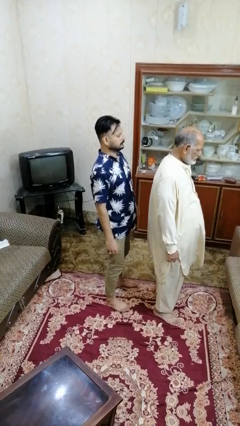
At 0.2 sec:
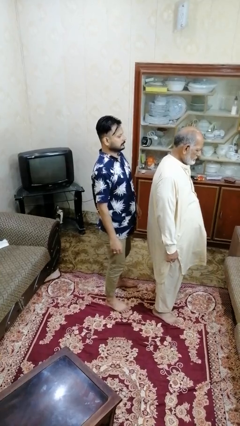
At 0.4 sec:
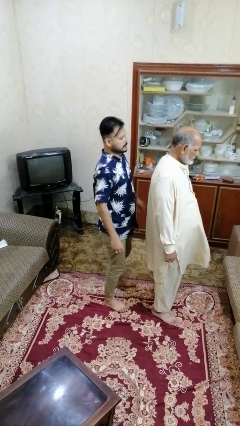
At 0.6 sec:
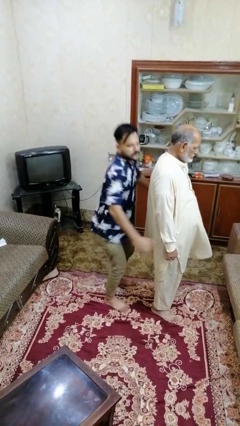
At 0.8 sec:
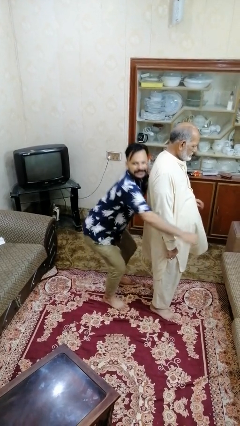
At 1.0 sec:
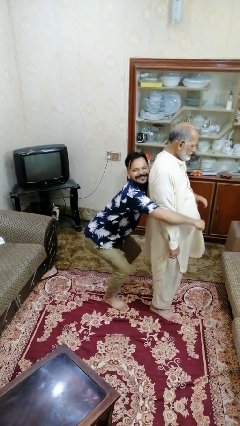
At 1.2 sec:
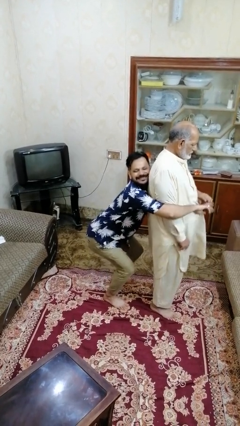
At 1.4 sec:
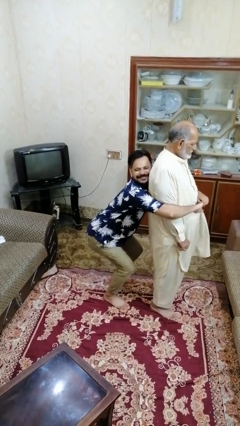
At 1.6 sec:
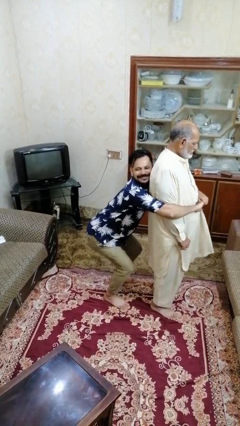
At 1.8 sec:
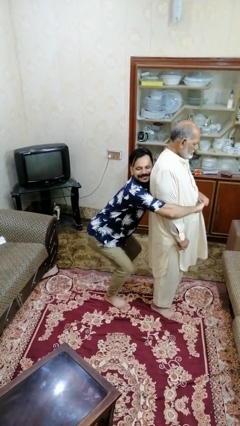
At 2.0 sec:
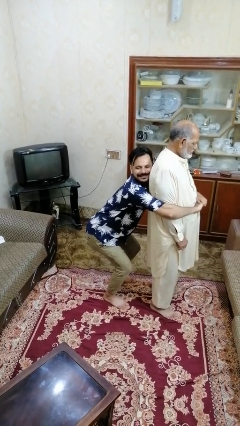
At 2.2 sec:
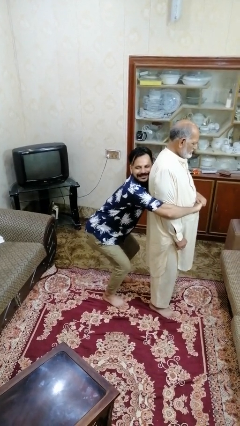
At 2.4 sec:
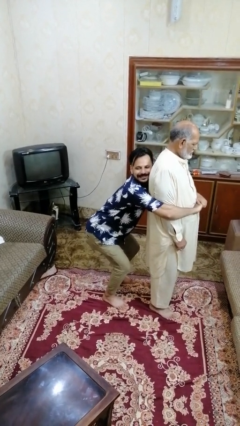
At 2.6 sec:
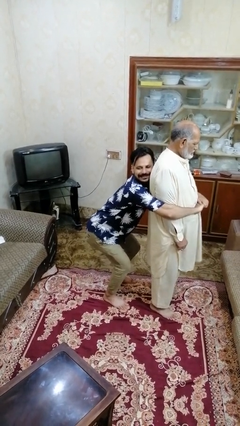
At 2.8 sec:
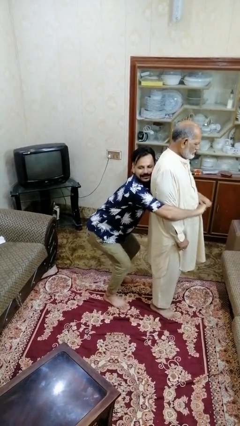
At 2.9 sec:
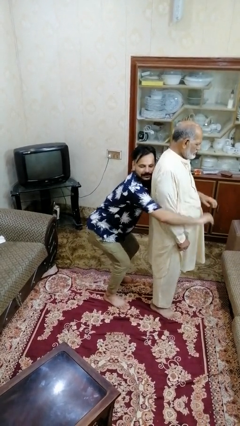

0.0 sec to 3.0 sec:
person grabs person by forearm

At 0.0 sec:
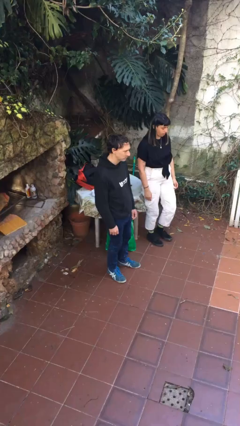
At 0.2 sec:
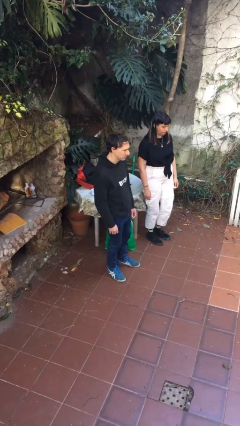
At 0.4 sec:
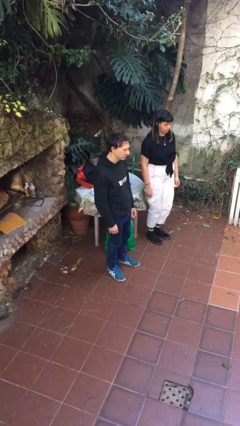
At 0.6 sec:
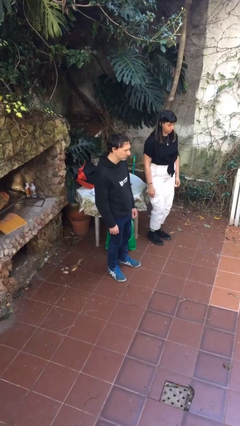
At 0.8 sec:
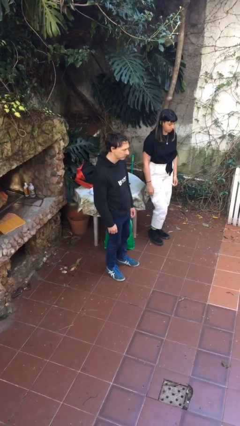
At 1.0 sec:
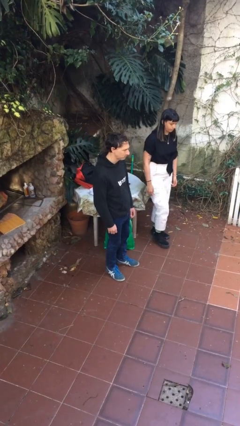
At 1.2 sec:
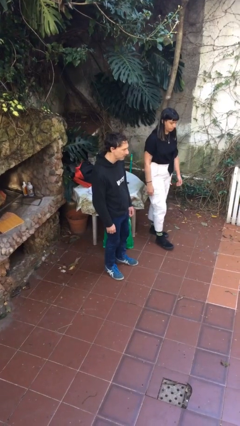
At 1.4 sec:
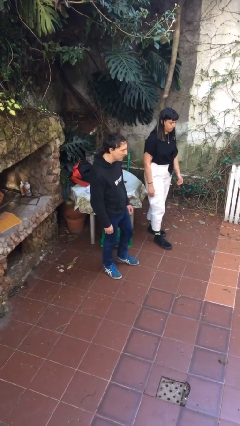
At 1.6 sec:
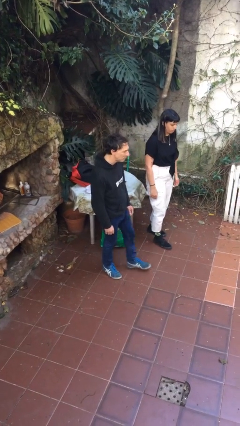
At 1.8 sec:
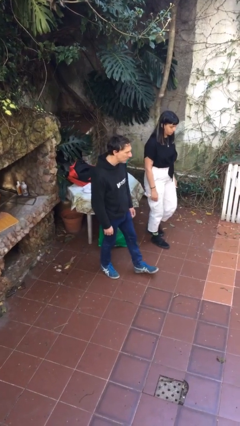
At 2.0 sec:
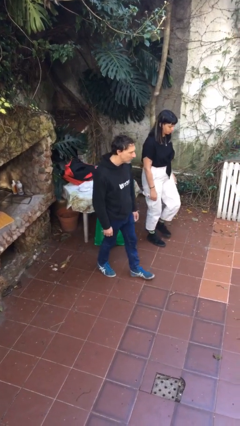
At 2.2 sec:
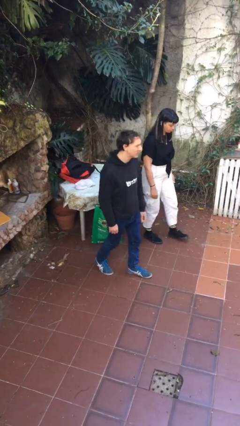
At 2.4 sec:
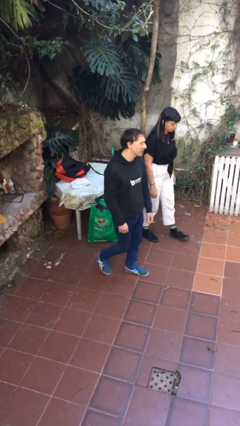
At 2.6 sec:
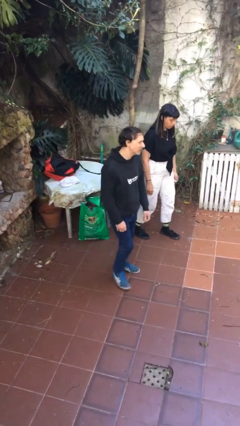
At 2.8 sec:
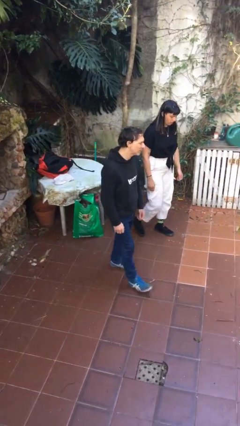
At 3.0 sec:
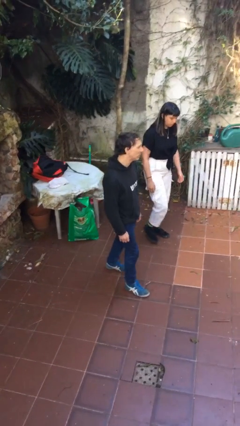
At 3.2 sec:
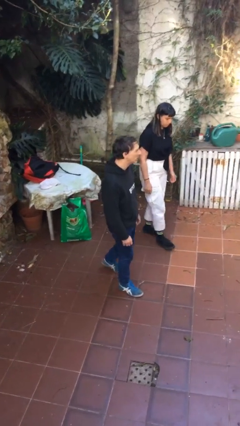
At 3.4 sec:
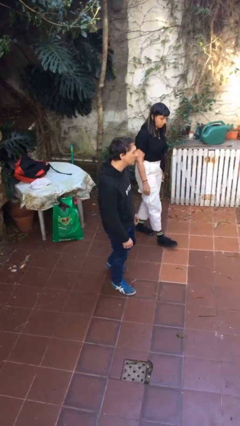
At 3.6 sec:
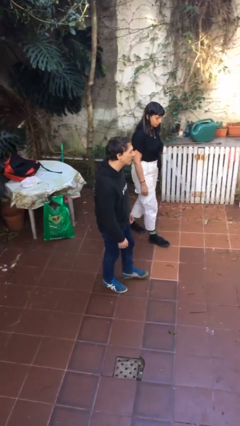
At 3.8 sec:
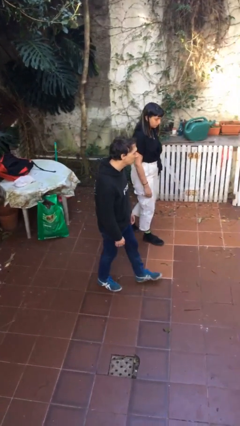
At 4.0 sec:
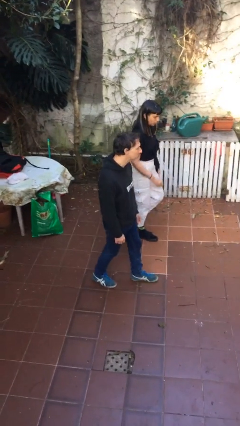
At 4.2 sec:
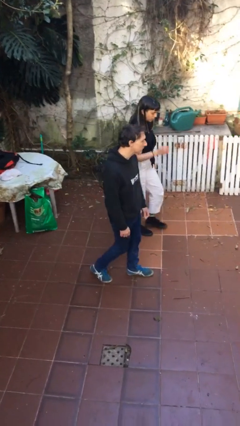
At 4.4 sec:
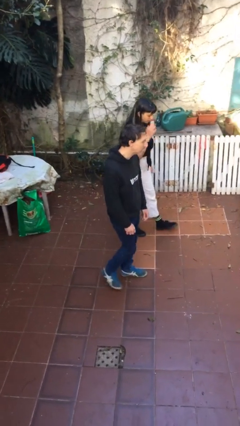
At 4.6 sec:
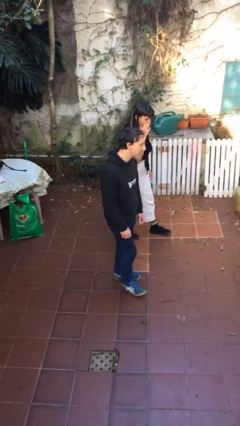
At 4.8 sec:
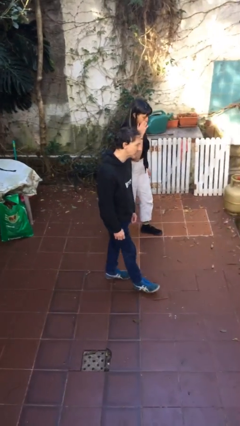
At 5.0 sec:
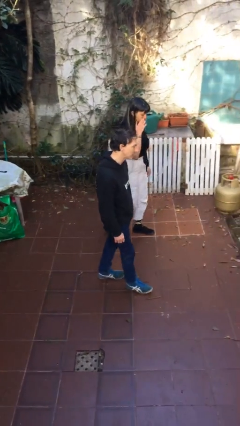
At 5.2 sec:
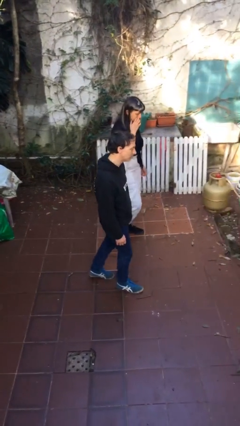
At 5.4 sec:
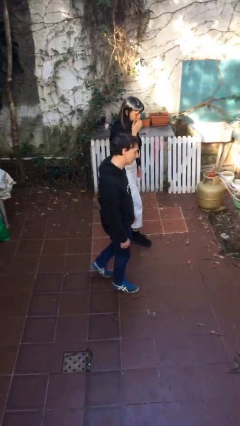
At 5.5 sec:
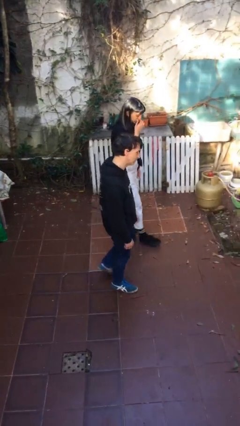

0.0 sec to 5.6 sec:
person talks to person

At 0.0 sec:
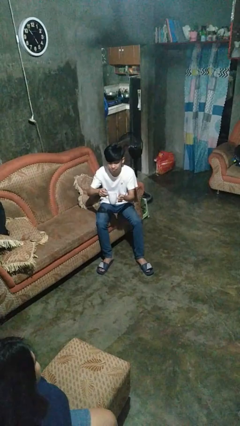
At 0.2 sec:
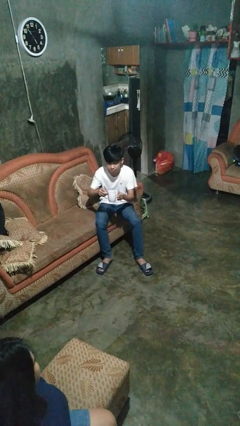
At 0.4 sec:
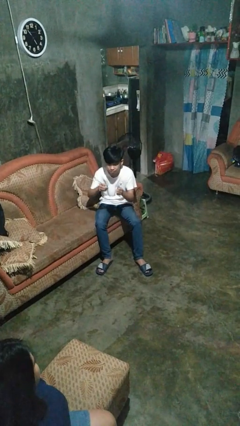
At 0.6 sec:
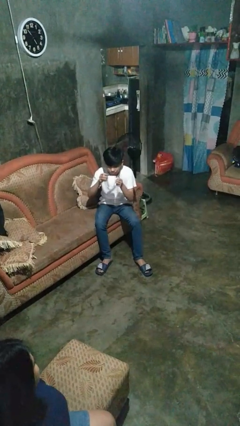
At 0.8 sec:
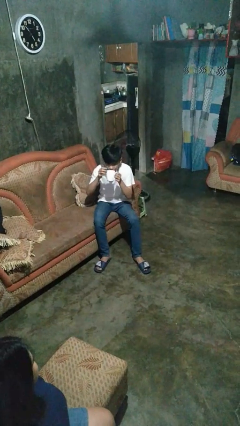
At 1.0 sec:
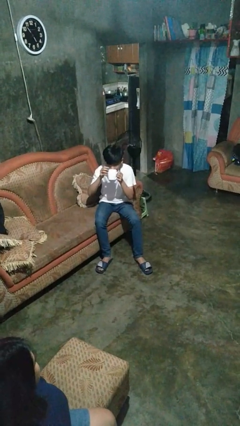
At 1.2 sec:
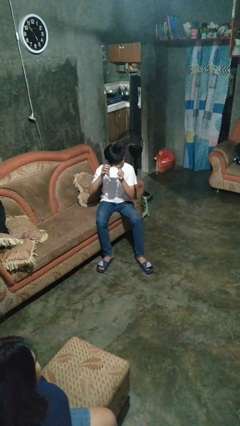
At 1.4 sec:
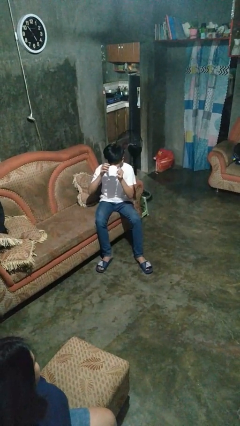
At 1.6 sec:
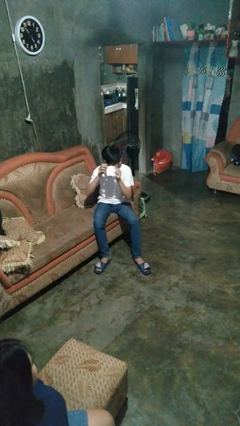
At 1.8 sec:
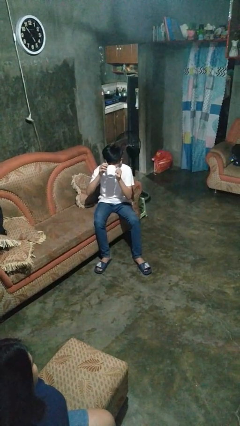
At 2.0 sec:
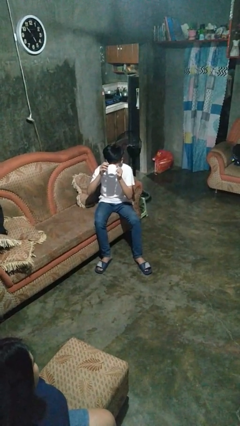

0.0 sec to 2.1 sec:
person drinks from mug

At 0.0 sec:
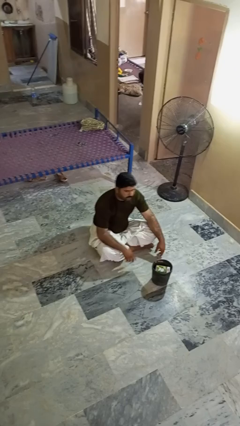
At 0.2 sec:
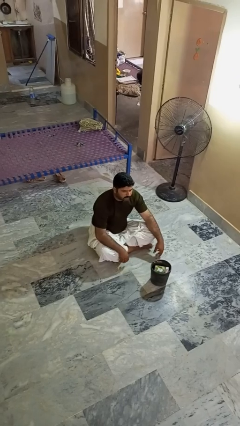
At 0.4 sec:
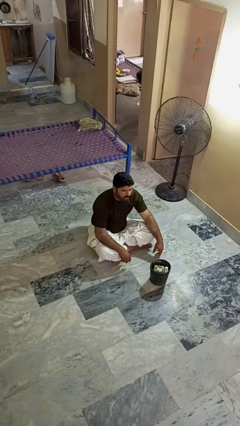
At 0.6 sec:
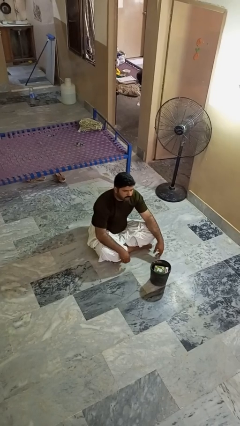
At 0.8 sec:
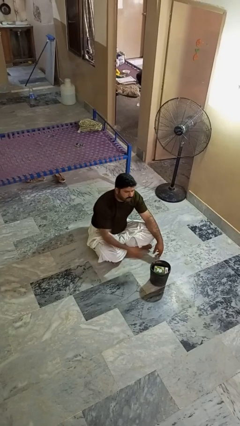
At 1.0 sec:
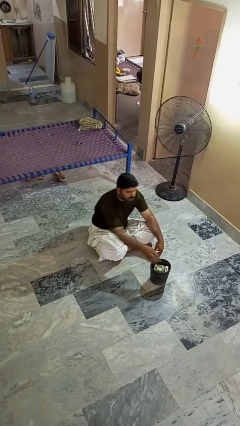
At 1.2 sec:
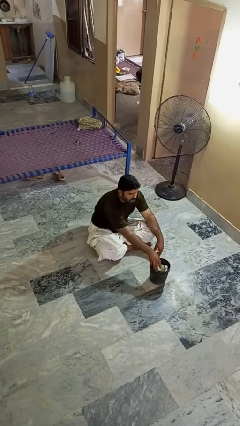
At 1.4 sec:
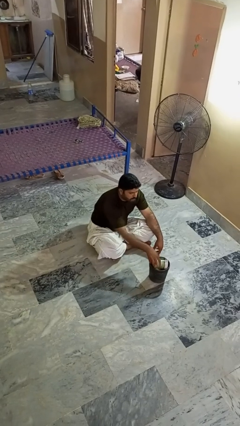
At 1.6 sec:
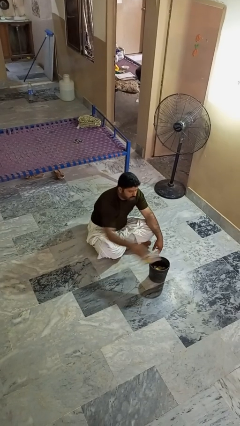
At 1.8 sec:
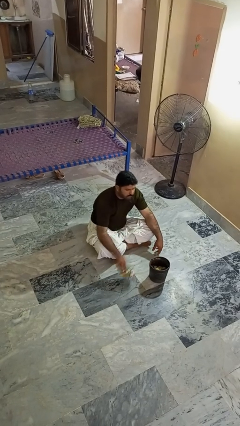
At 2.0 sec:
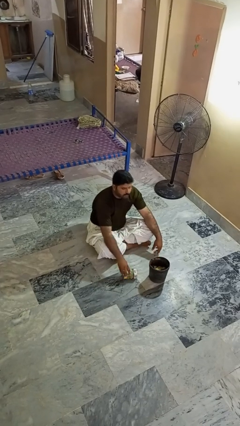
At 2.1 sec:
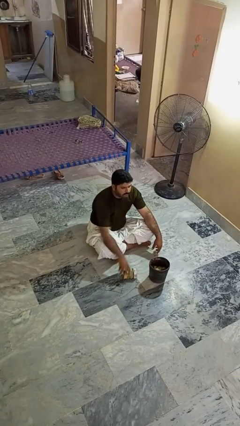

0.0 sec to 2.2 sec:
person takes object from basket

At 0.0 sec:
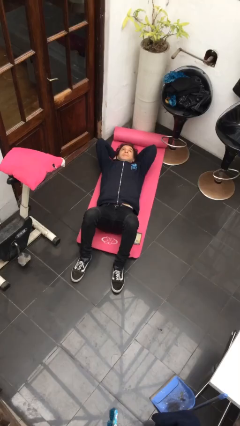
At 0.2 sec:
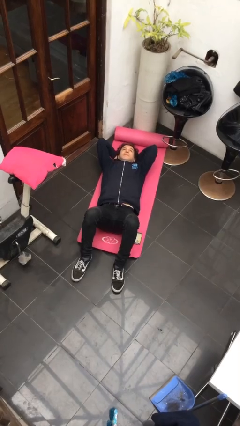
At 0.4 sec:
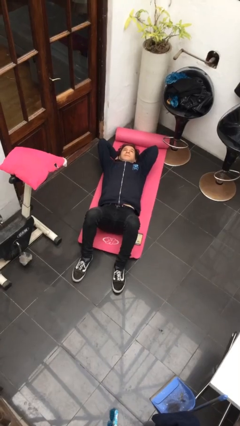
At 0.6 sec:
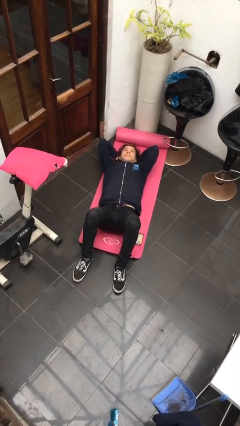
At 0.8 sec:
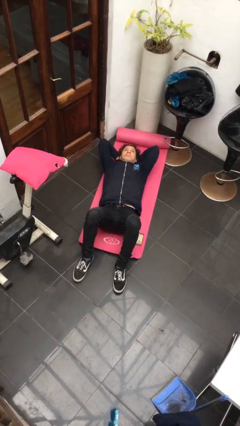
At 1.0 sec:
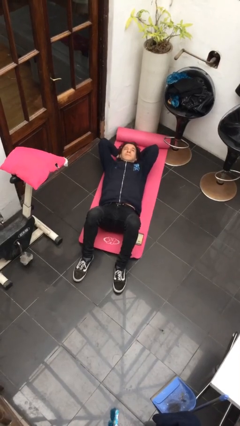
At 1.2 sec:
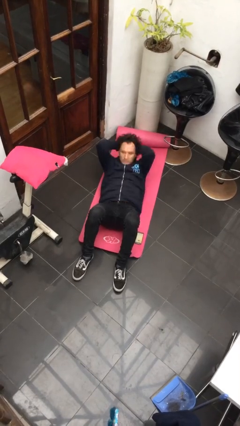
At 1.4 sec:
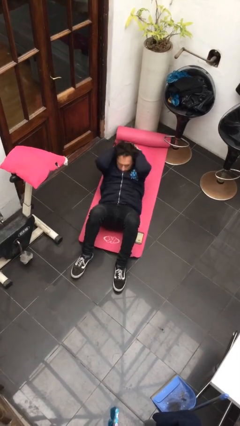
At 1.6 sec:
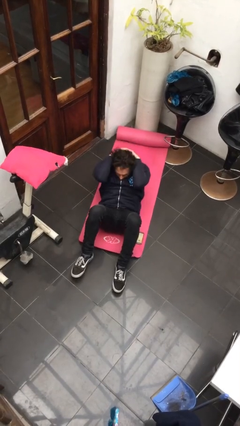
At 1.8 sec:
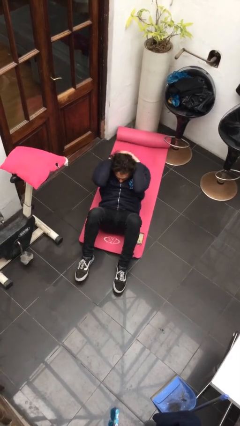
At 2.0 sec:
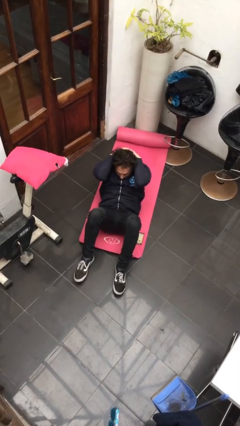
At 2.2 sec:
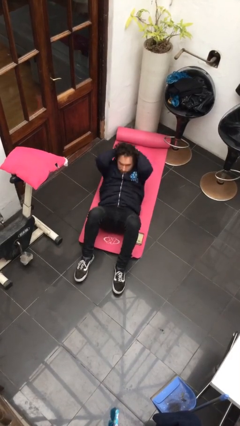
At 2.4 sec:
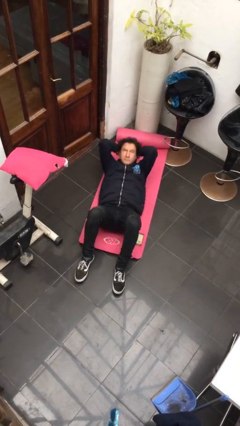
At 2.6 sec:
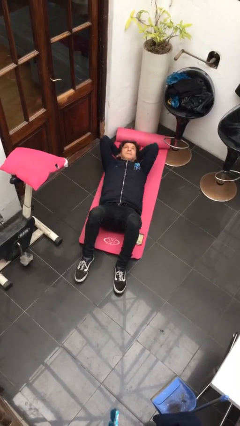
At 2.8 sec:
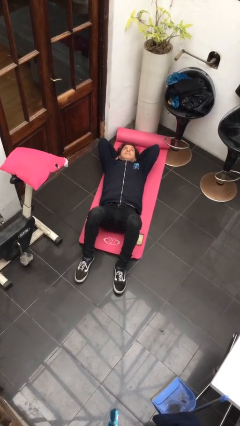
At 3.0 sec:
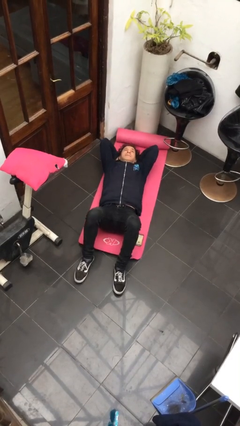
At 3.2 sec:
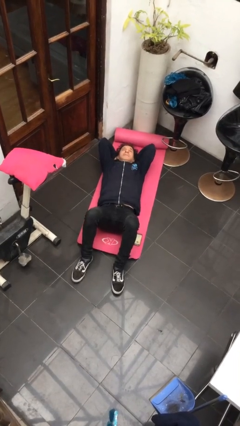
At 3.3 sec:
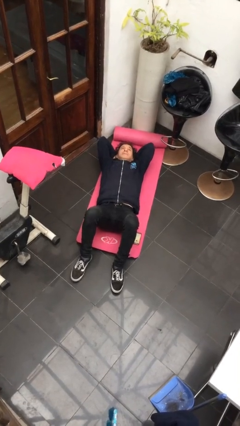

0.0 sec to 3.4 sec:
person exercises with situp

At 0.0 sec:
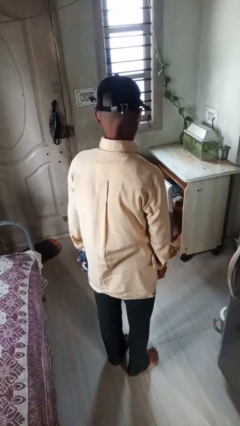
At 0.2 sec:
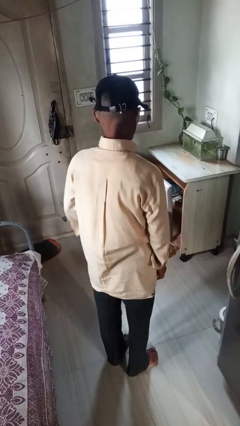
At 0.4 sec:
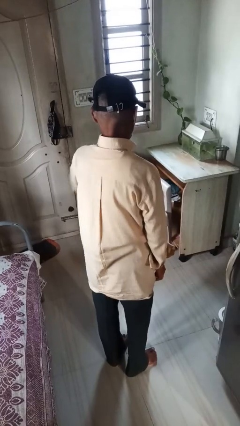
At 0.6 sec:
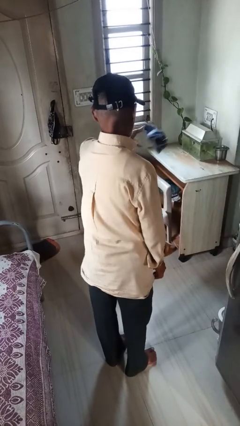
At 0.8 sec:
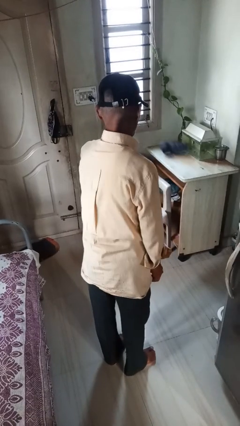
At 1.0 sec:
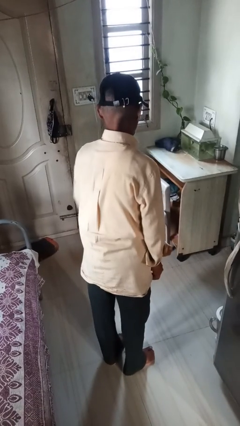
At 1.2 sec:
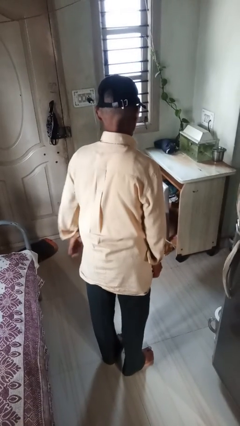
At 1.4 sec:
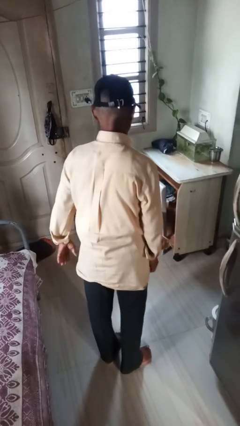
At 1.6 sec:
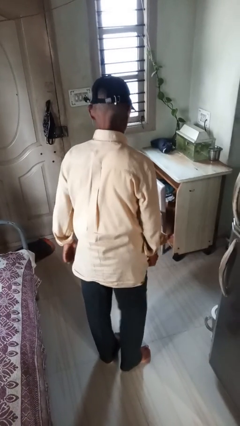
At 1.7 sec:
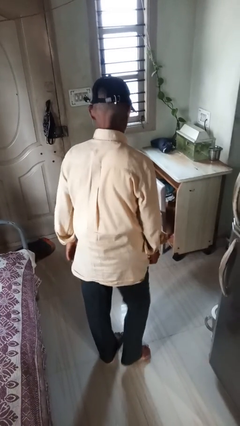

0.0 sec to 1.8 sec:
person throws object on table
